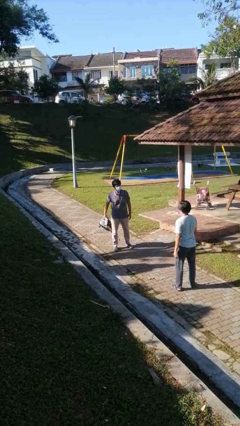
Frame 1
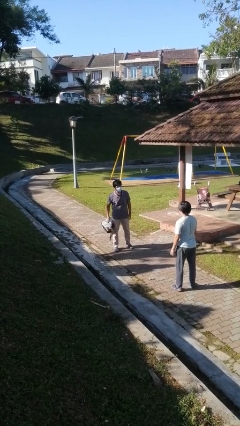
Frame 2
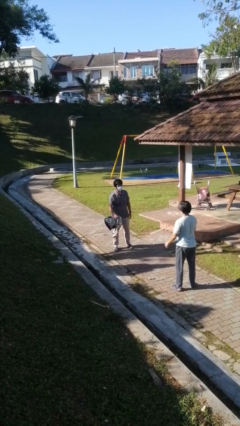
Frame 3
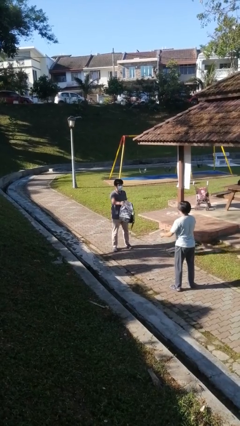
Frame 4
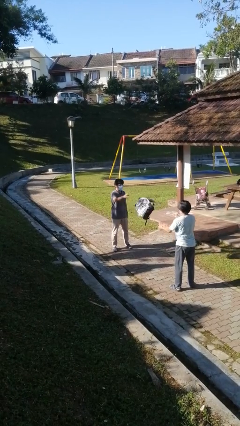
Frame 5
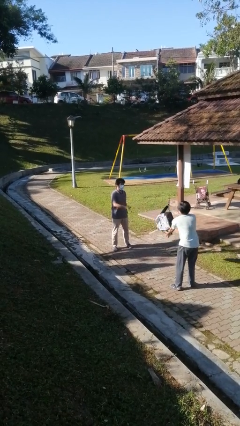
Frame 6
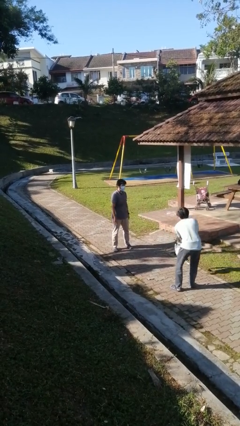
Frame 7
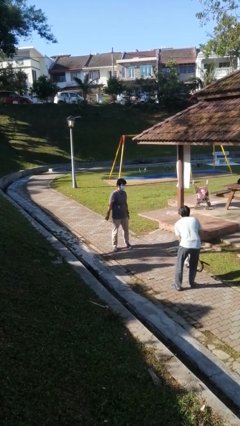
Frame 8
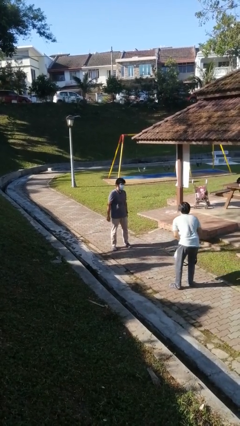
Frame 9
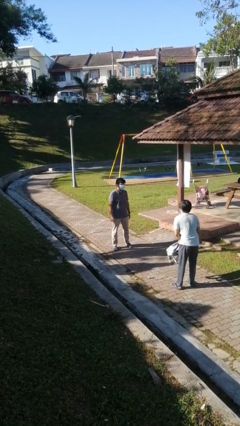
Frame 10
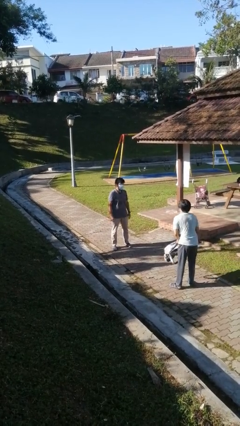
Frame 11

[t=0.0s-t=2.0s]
person throws object to person

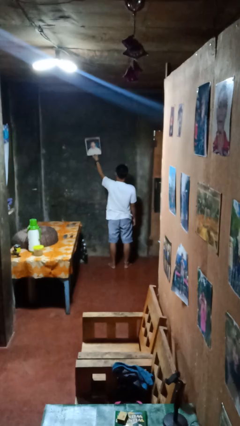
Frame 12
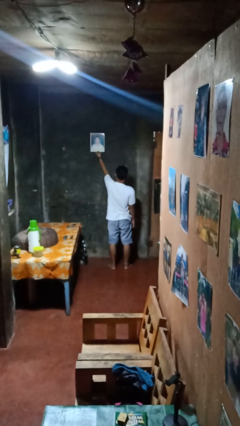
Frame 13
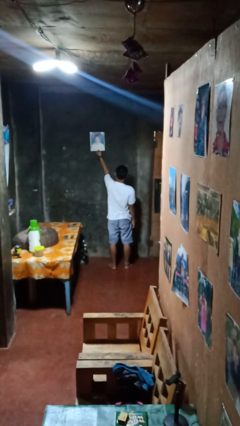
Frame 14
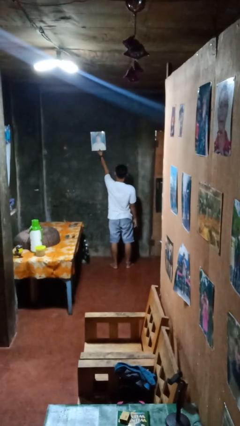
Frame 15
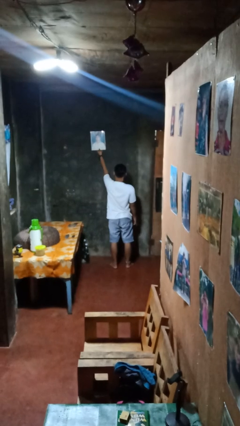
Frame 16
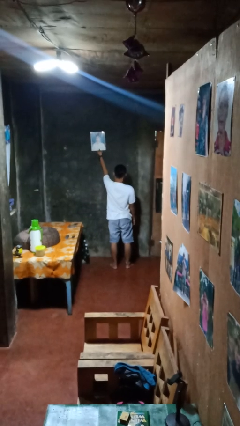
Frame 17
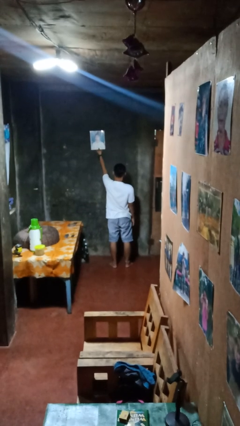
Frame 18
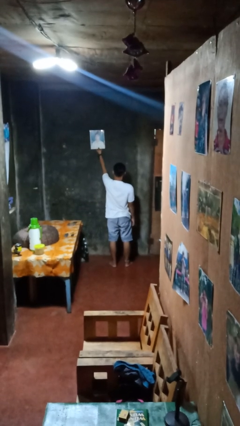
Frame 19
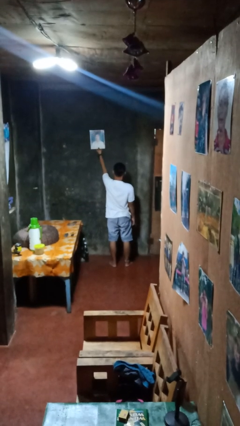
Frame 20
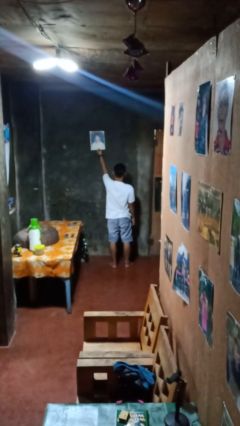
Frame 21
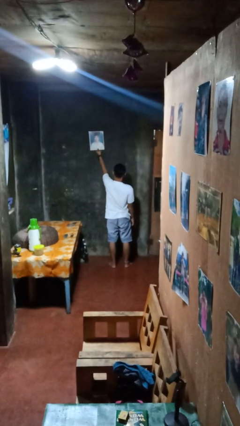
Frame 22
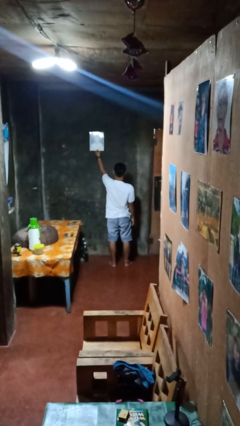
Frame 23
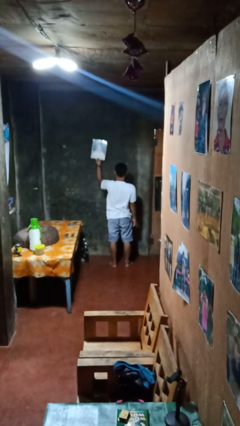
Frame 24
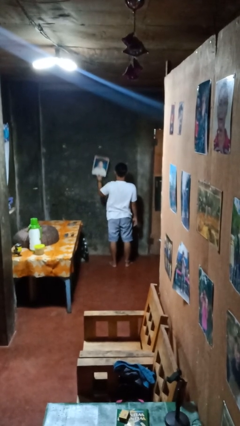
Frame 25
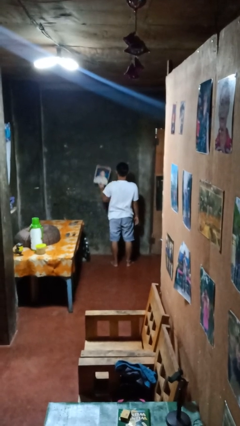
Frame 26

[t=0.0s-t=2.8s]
person puts up picture frame

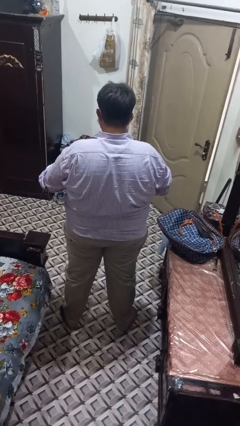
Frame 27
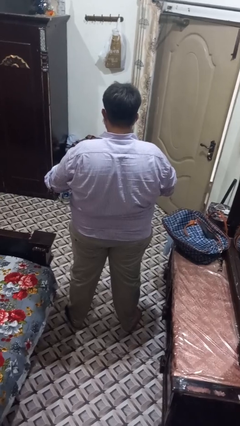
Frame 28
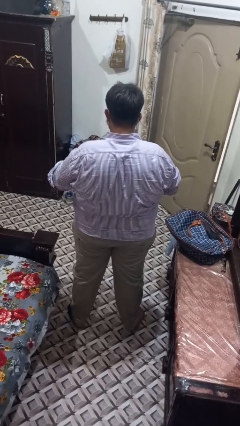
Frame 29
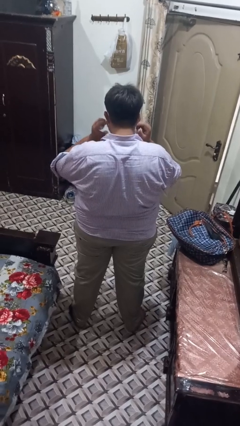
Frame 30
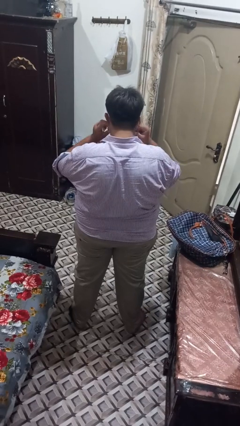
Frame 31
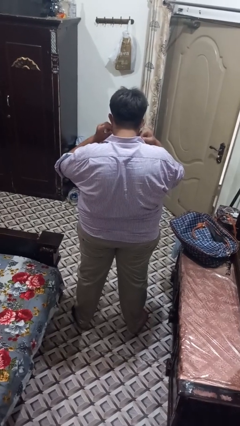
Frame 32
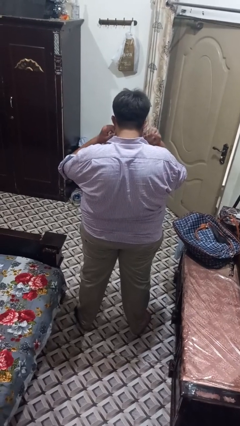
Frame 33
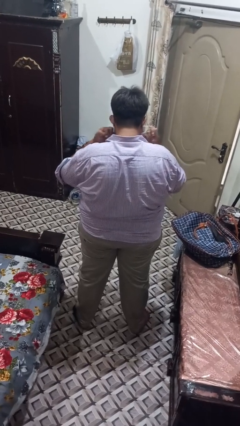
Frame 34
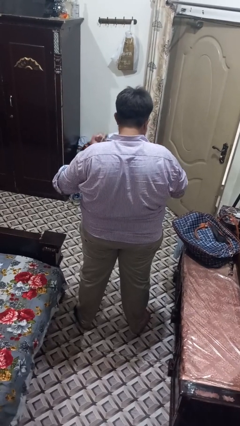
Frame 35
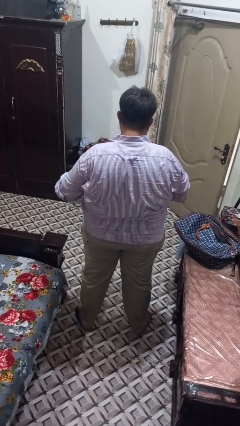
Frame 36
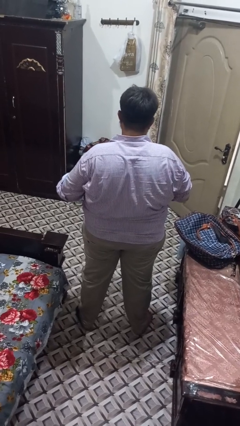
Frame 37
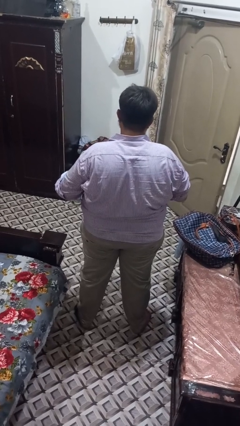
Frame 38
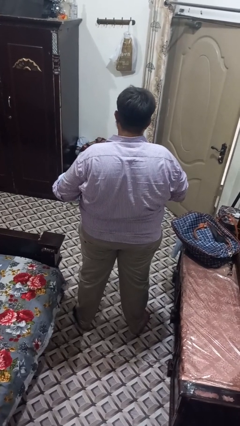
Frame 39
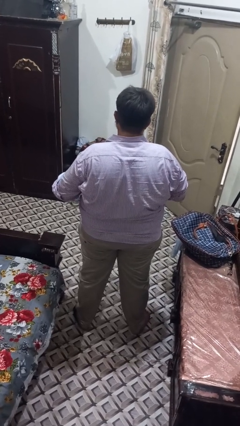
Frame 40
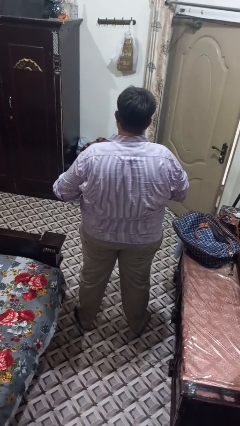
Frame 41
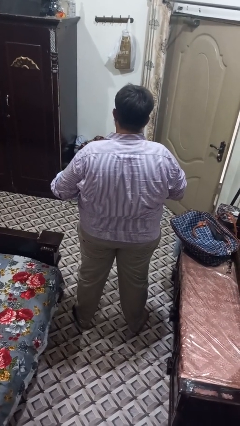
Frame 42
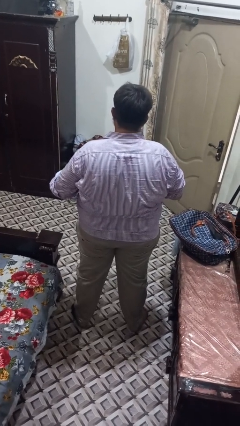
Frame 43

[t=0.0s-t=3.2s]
person takes off facemask

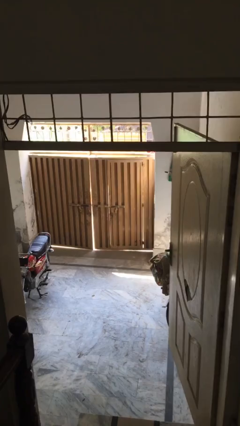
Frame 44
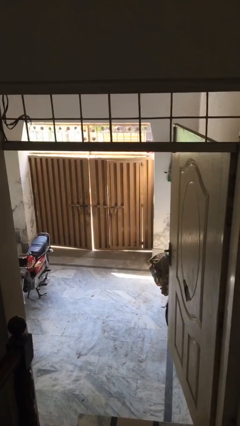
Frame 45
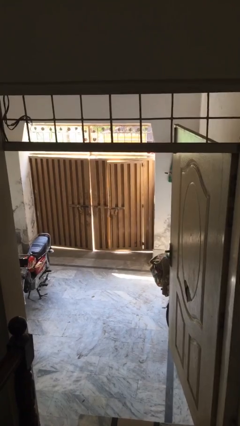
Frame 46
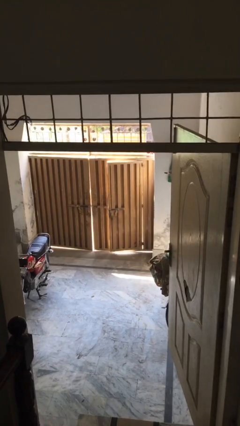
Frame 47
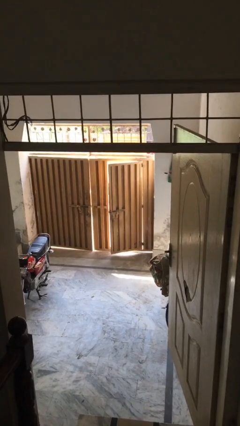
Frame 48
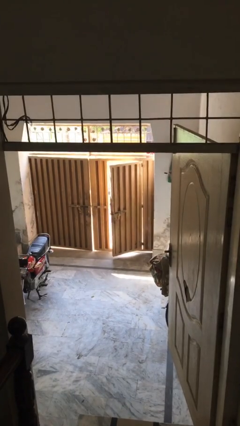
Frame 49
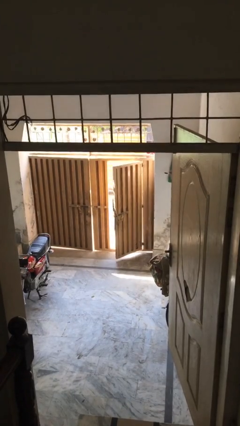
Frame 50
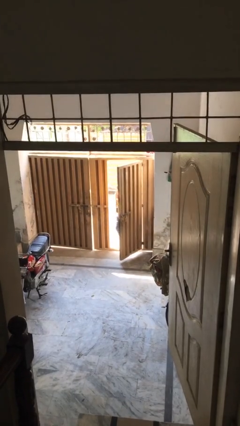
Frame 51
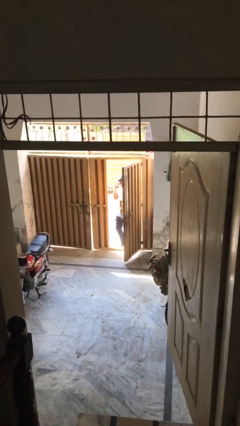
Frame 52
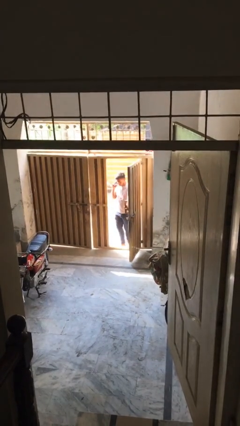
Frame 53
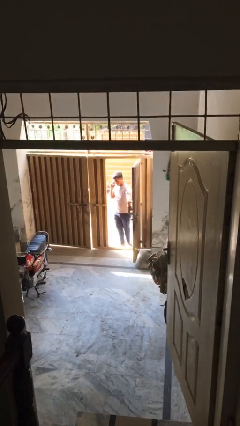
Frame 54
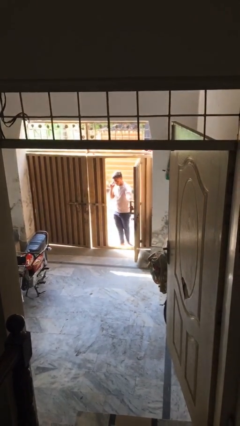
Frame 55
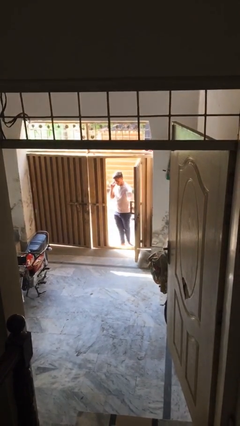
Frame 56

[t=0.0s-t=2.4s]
person opens facility door

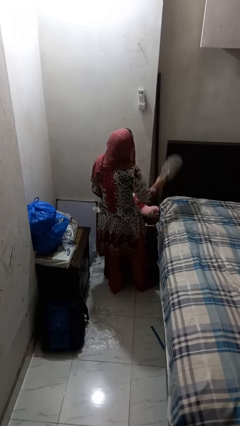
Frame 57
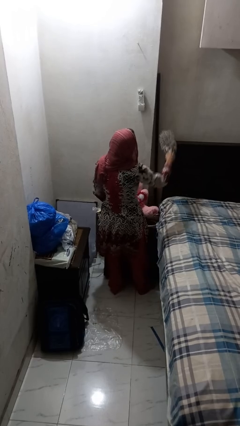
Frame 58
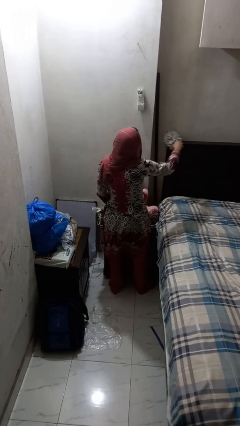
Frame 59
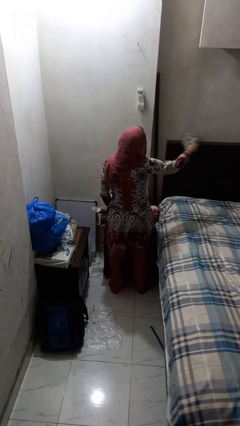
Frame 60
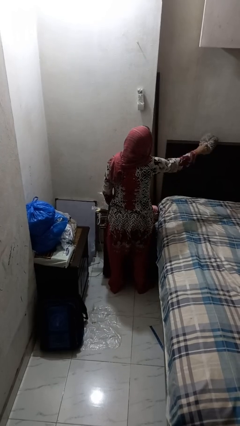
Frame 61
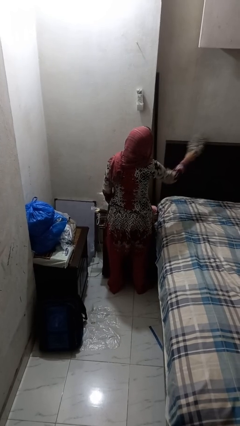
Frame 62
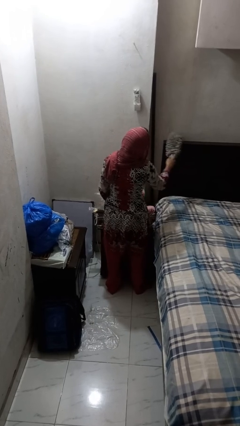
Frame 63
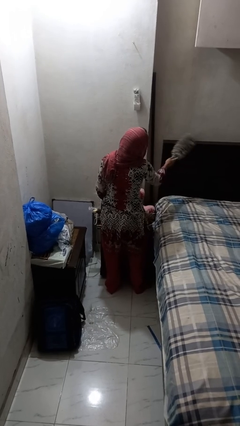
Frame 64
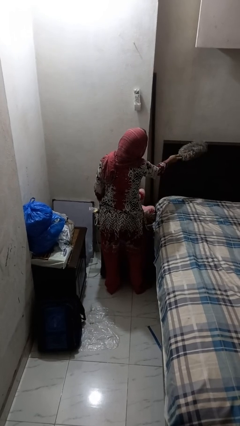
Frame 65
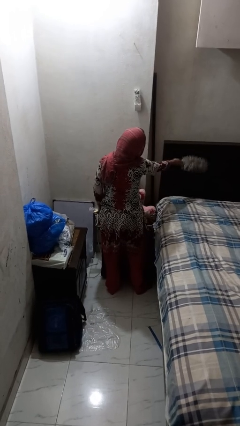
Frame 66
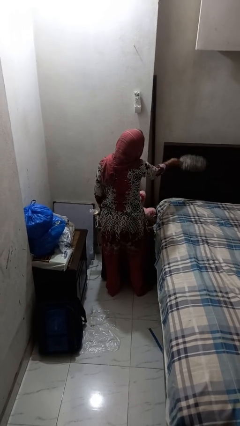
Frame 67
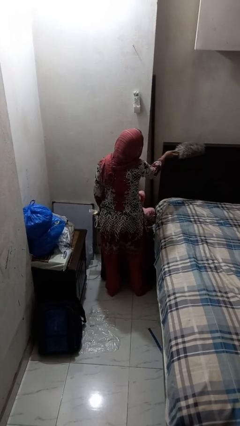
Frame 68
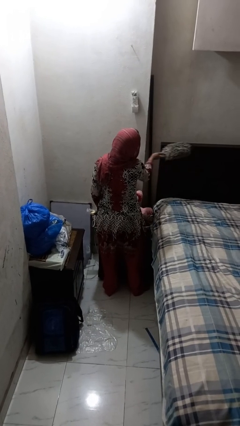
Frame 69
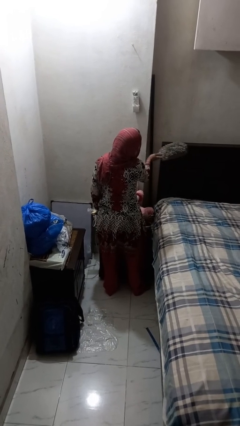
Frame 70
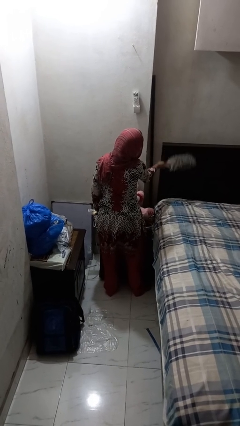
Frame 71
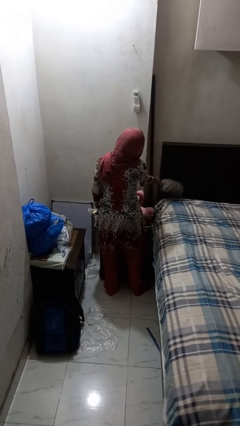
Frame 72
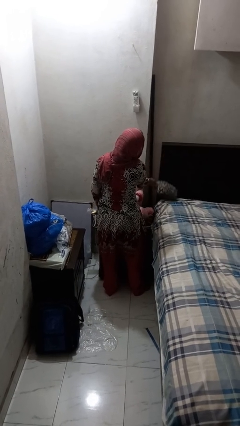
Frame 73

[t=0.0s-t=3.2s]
person dusts furniture

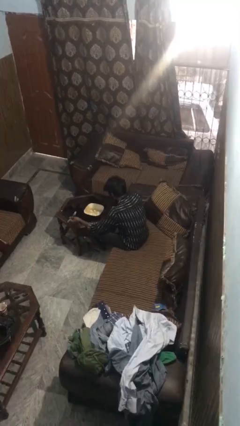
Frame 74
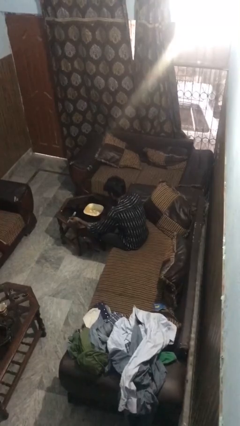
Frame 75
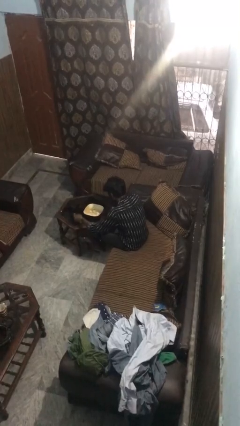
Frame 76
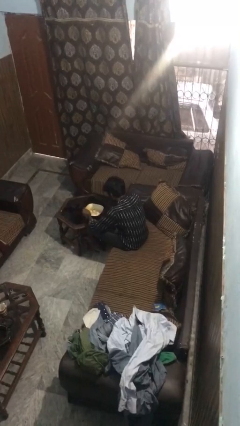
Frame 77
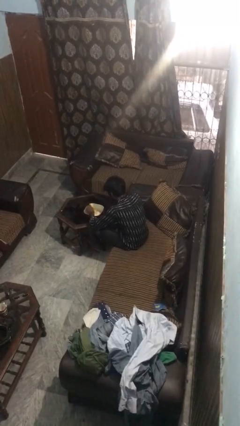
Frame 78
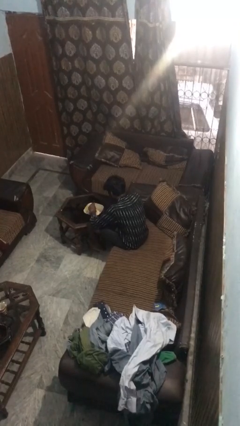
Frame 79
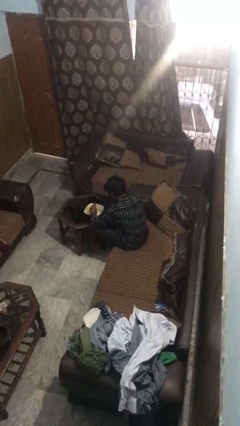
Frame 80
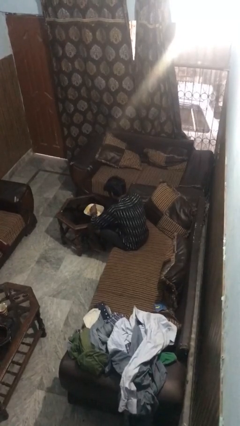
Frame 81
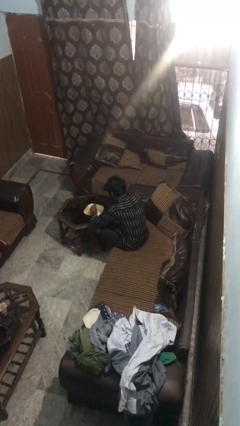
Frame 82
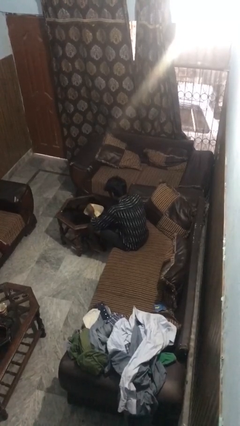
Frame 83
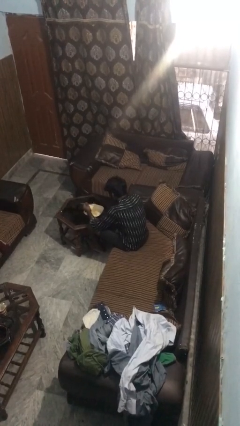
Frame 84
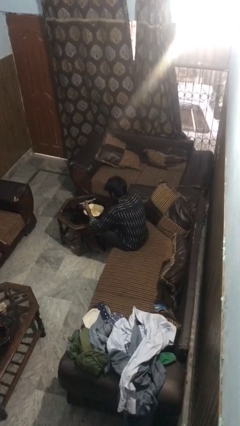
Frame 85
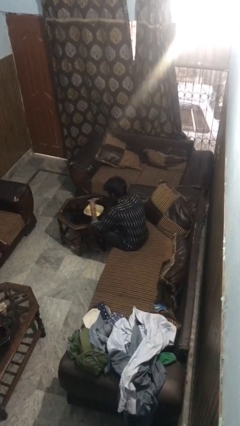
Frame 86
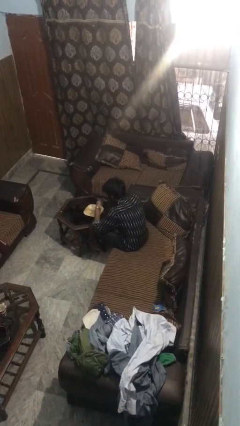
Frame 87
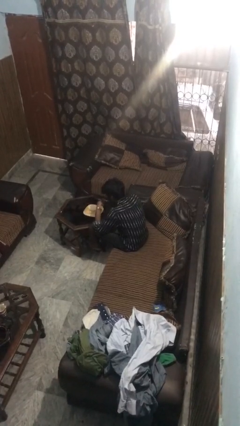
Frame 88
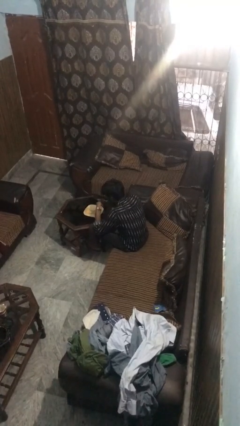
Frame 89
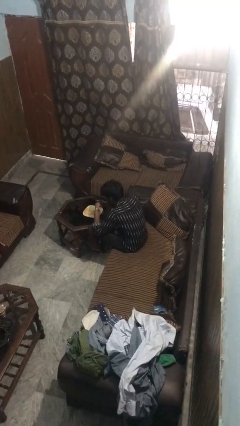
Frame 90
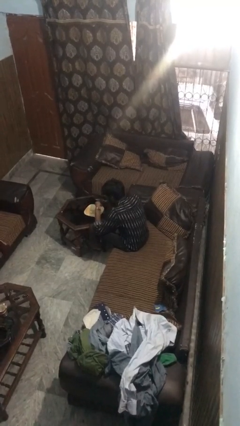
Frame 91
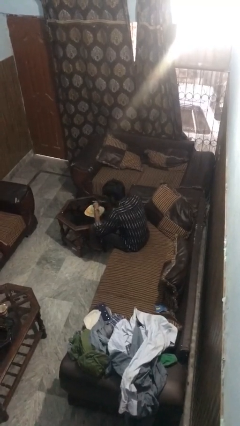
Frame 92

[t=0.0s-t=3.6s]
person eats with utensil

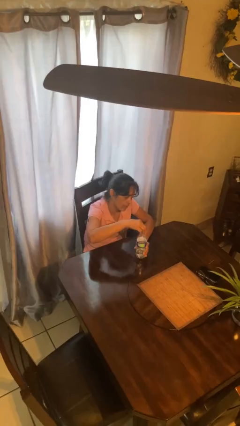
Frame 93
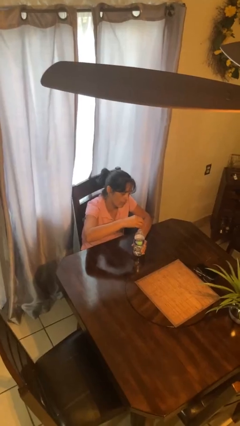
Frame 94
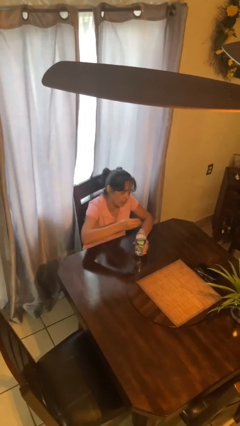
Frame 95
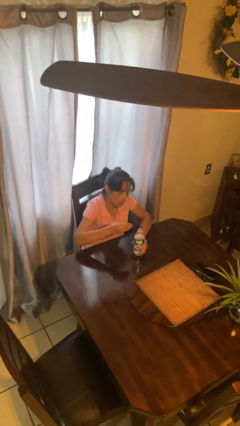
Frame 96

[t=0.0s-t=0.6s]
person unscrews lid from bottle
